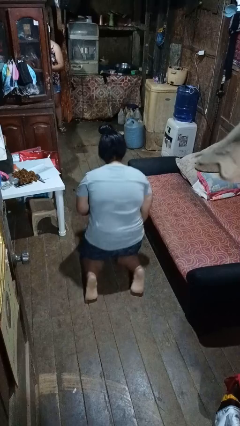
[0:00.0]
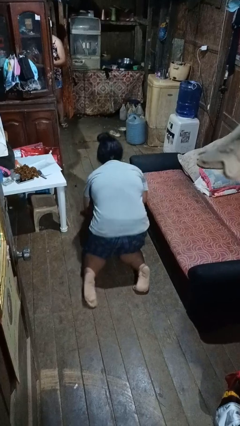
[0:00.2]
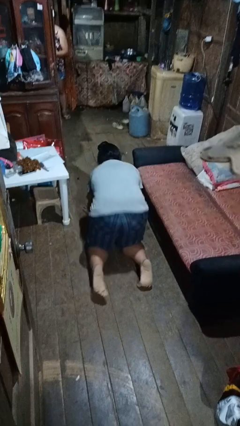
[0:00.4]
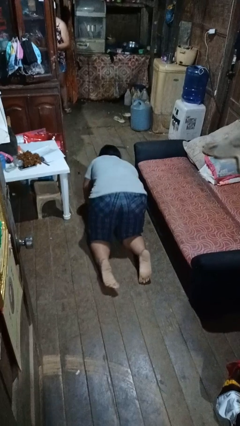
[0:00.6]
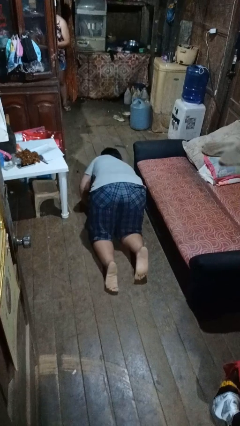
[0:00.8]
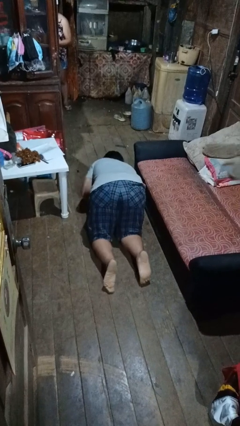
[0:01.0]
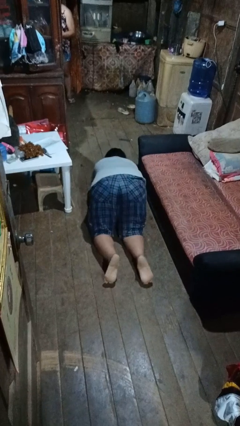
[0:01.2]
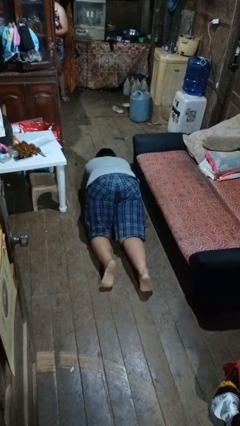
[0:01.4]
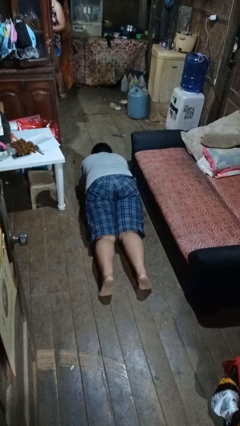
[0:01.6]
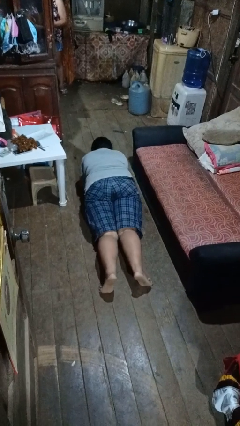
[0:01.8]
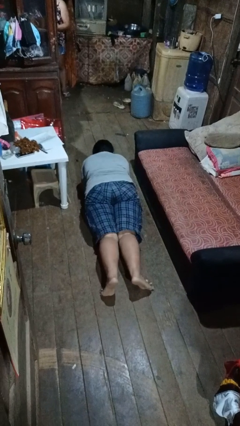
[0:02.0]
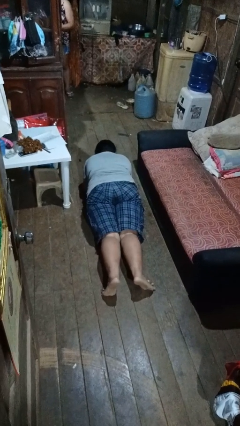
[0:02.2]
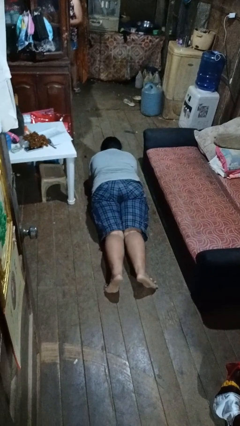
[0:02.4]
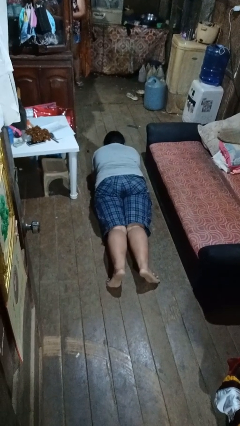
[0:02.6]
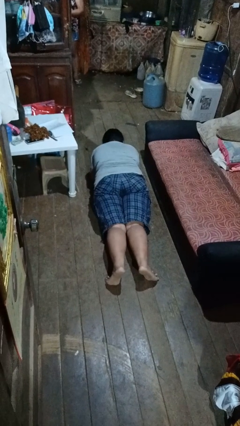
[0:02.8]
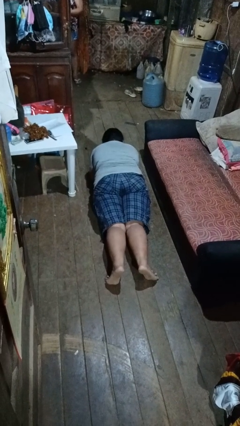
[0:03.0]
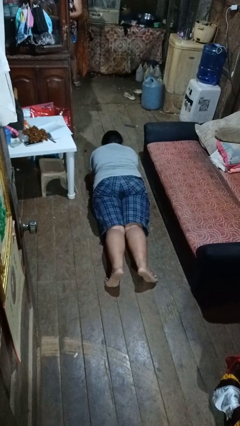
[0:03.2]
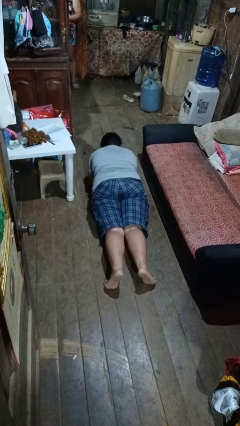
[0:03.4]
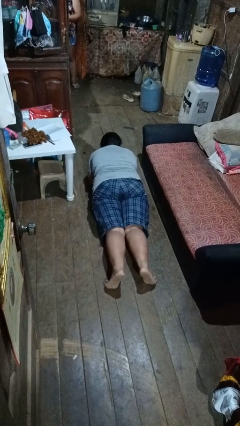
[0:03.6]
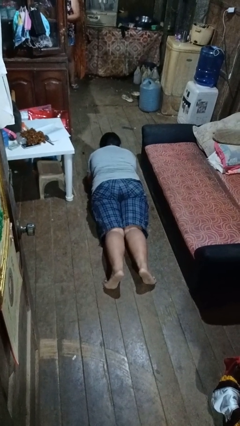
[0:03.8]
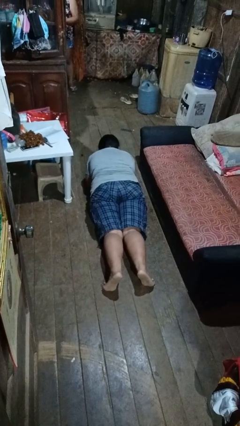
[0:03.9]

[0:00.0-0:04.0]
person exercises with plank

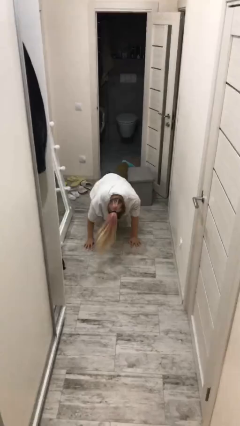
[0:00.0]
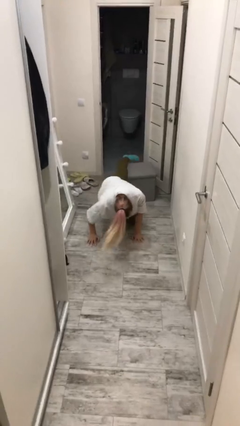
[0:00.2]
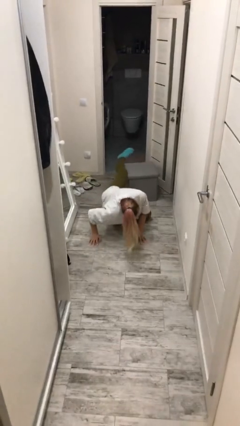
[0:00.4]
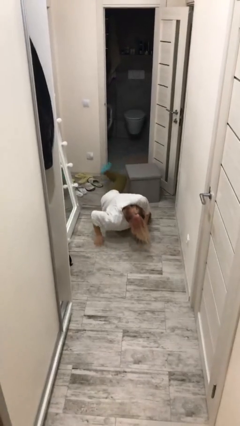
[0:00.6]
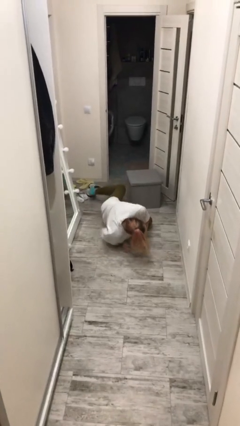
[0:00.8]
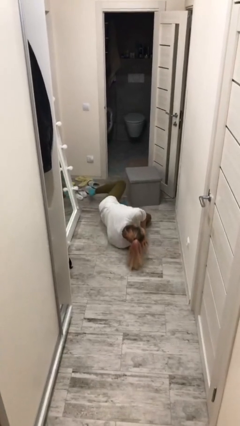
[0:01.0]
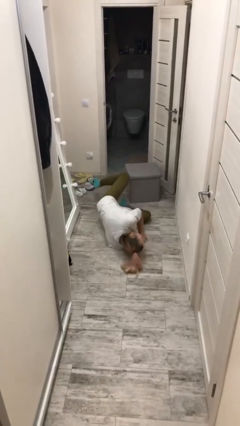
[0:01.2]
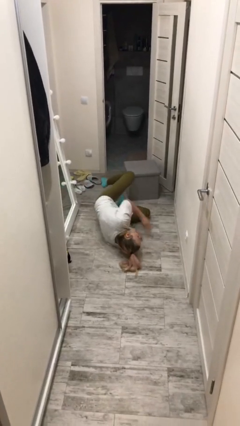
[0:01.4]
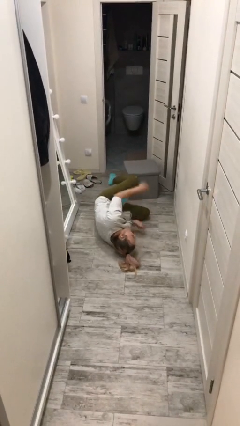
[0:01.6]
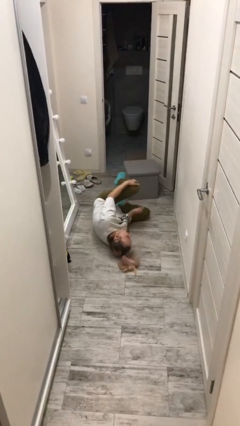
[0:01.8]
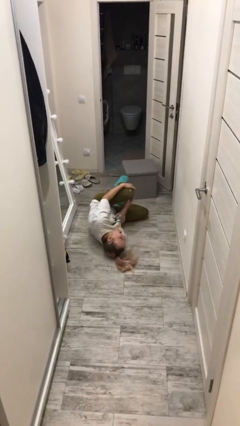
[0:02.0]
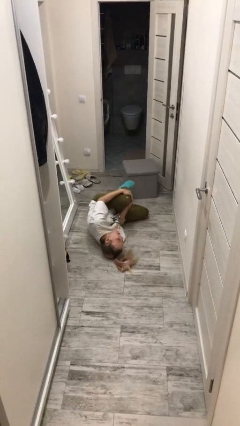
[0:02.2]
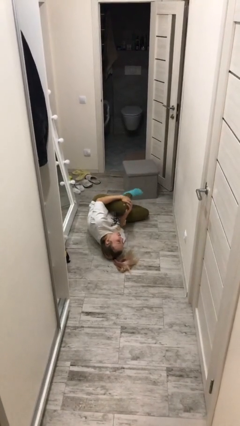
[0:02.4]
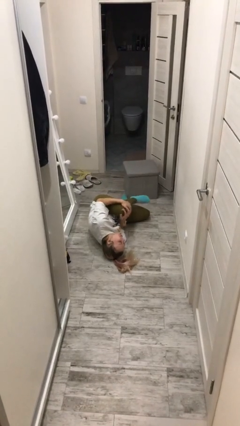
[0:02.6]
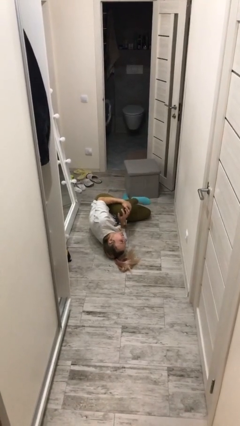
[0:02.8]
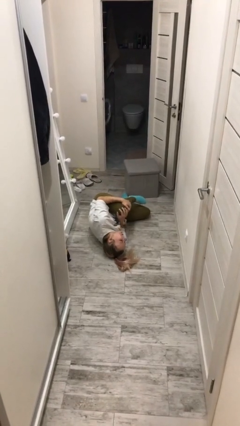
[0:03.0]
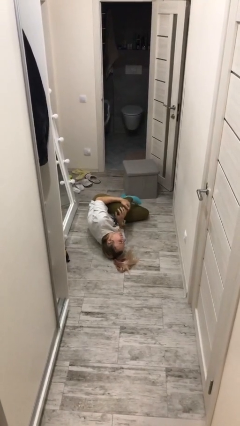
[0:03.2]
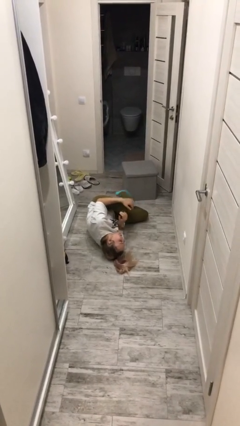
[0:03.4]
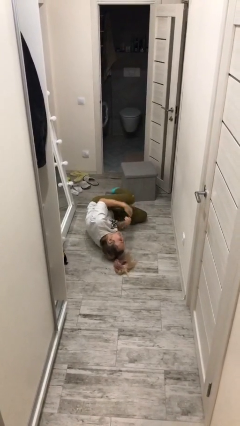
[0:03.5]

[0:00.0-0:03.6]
person lies down on floor

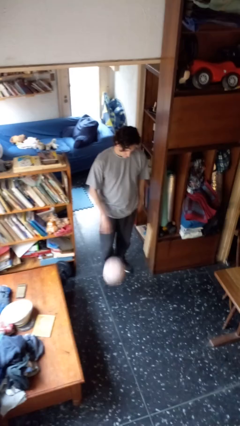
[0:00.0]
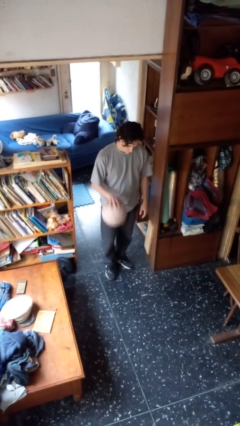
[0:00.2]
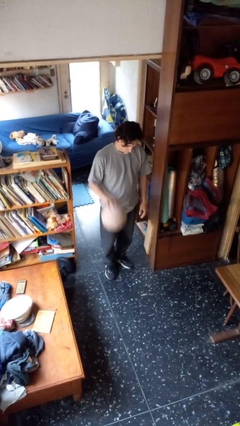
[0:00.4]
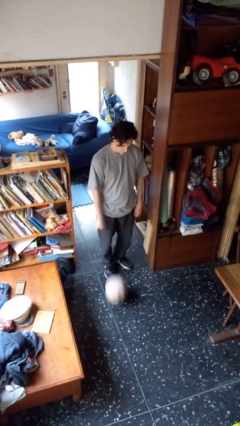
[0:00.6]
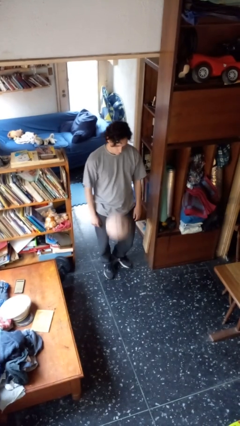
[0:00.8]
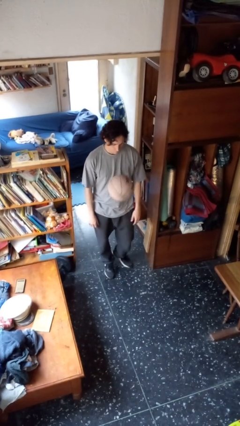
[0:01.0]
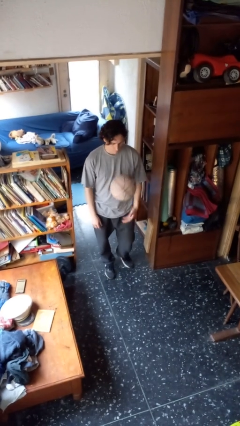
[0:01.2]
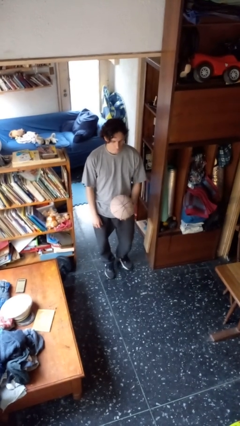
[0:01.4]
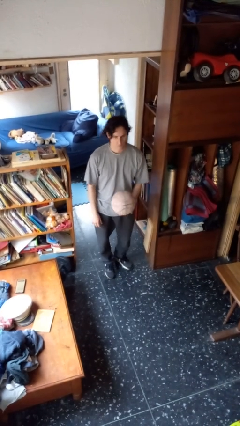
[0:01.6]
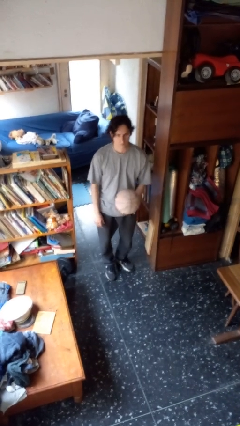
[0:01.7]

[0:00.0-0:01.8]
person bounces ball on floor

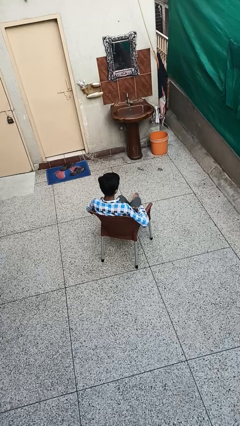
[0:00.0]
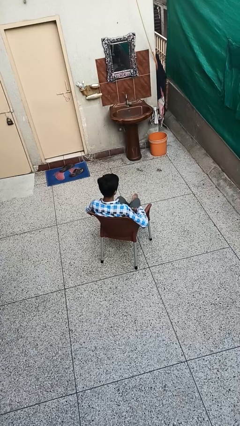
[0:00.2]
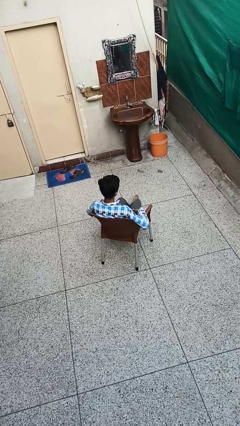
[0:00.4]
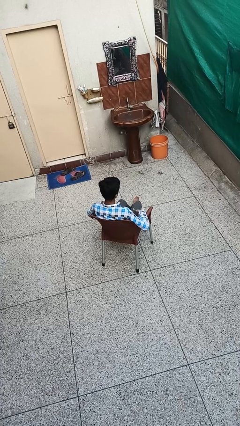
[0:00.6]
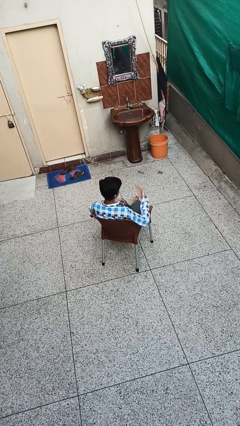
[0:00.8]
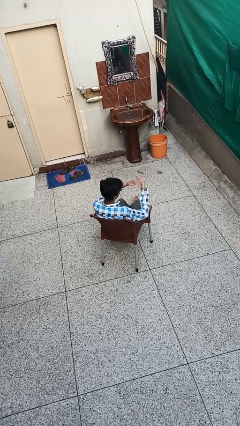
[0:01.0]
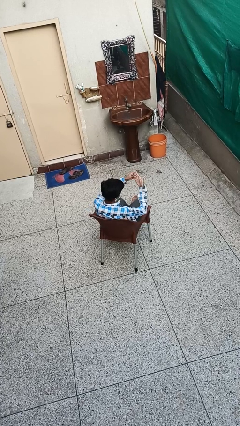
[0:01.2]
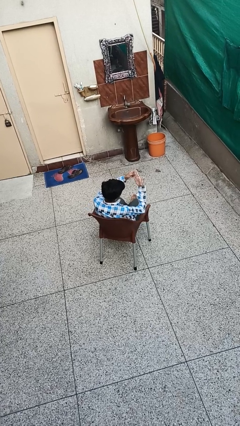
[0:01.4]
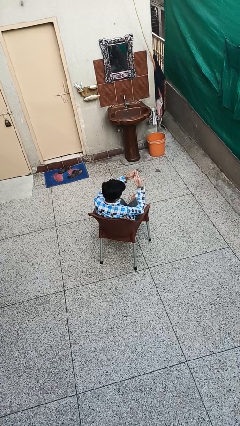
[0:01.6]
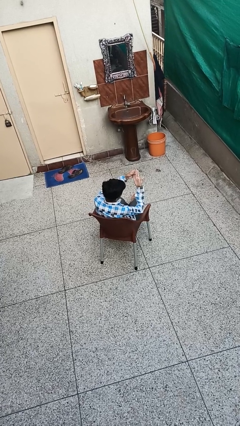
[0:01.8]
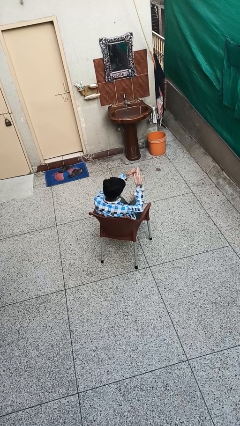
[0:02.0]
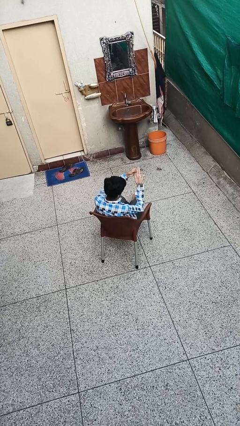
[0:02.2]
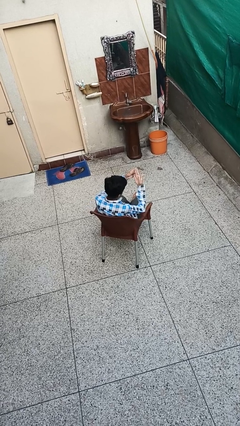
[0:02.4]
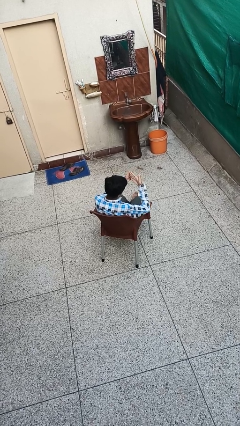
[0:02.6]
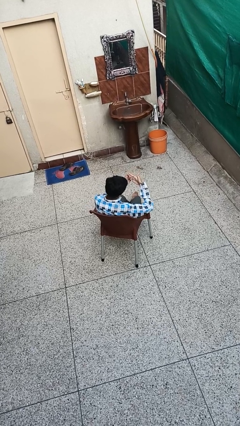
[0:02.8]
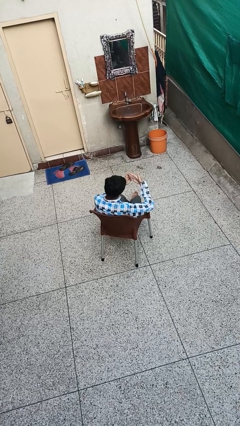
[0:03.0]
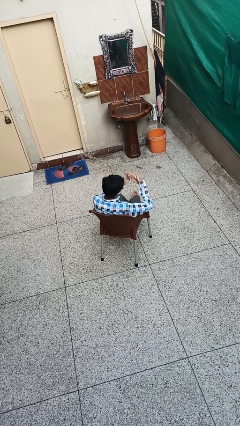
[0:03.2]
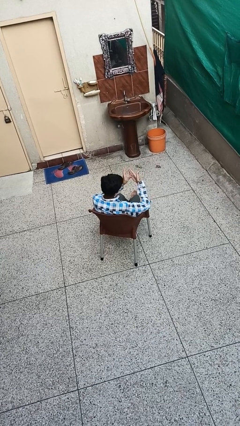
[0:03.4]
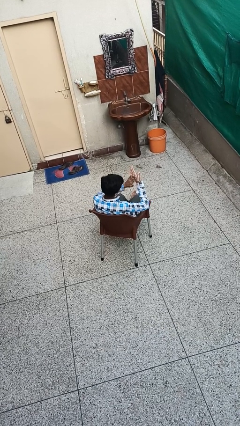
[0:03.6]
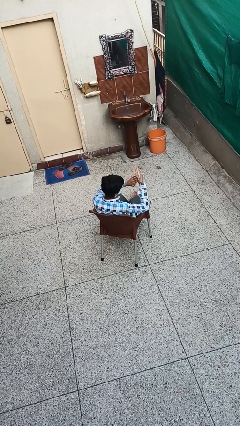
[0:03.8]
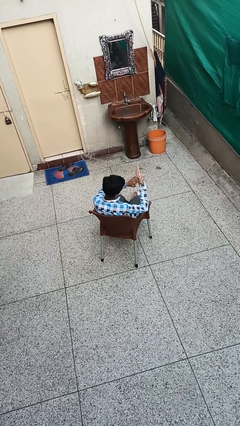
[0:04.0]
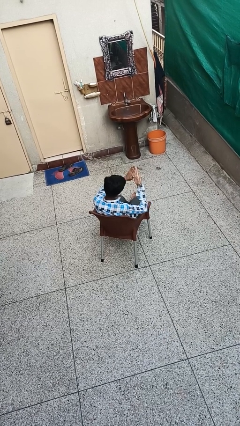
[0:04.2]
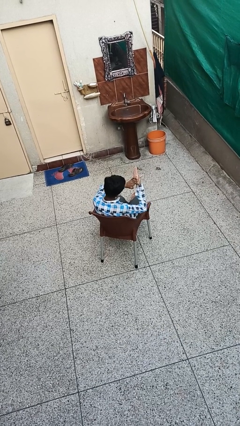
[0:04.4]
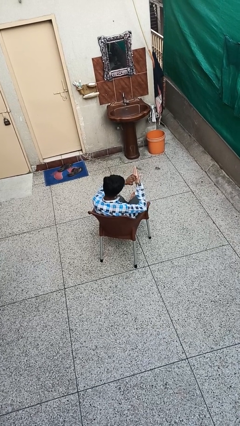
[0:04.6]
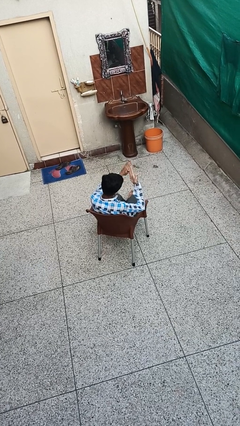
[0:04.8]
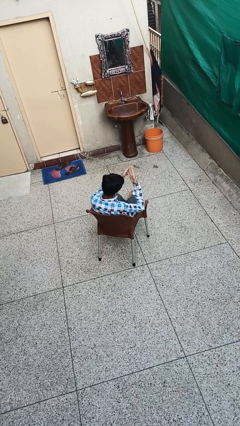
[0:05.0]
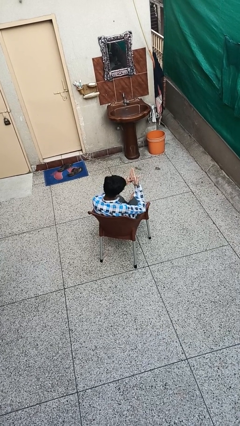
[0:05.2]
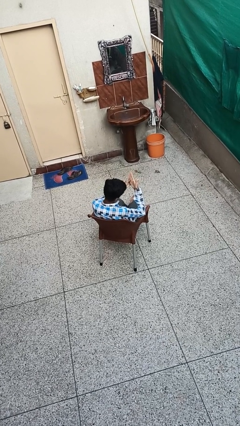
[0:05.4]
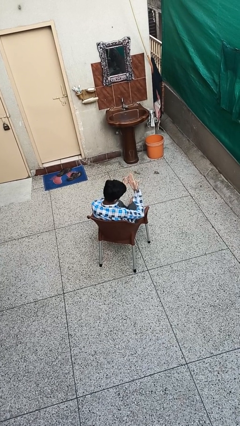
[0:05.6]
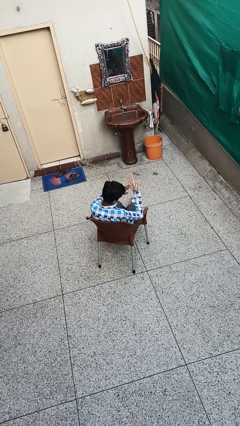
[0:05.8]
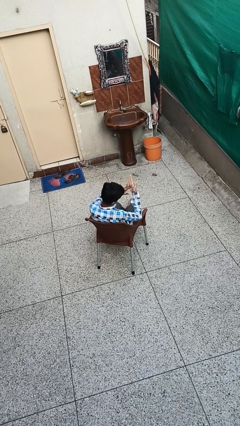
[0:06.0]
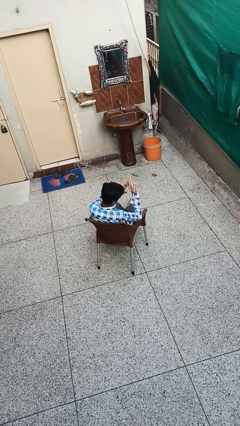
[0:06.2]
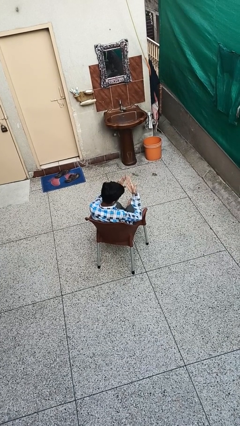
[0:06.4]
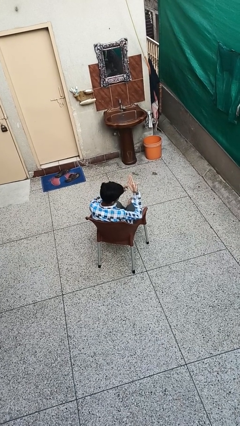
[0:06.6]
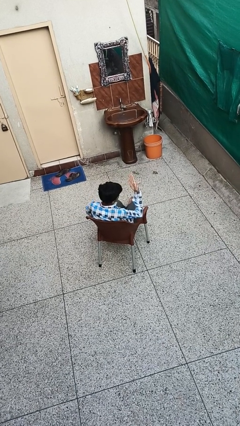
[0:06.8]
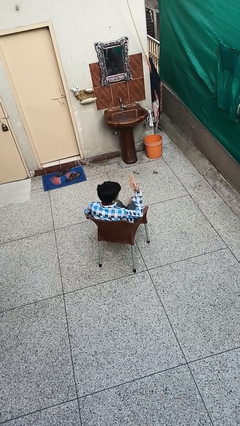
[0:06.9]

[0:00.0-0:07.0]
person looks at hands in lap

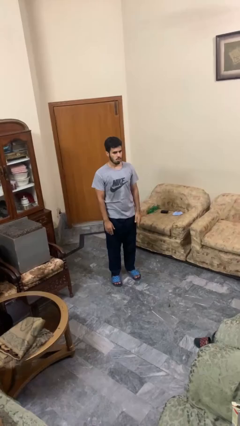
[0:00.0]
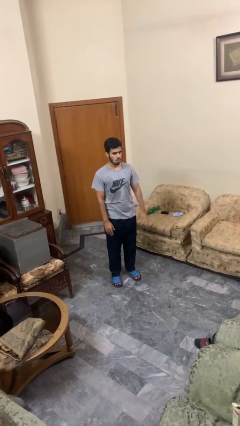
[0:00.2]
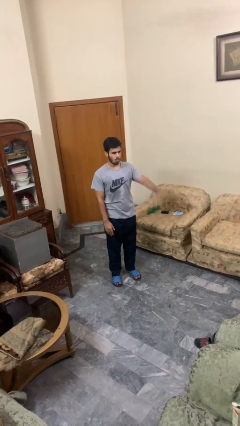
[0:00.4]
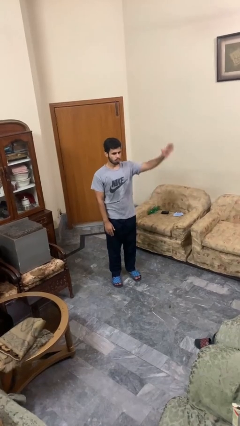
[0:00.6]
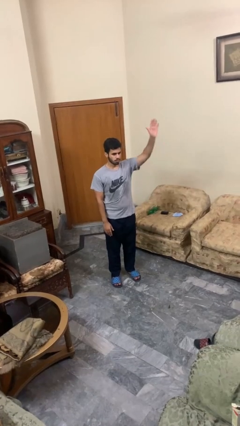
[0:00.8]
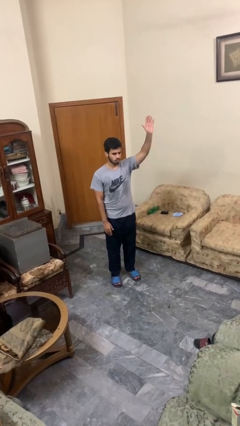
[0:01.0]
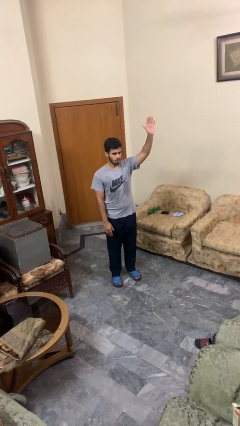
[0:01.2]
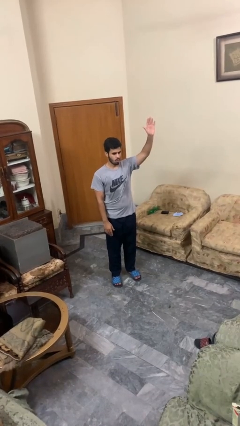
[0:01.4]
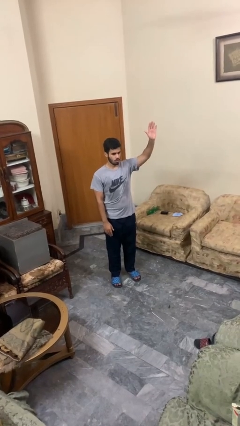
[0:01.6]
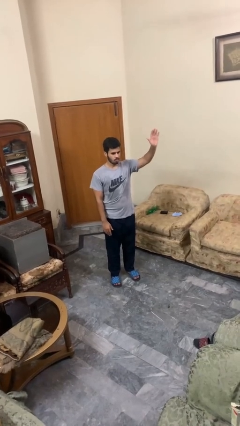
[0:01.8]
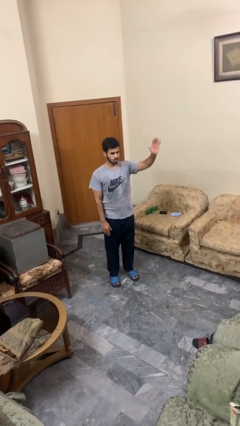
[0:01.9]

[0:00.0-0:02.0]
person gestures raise hand
